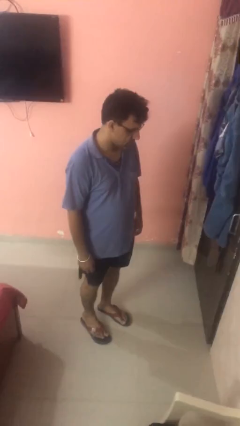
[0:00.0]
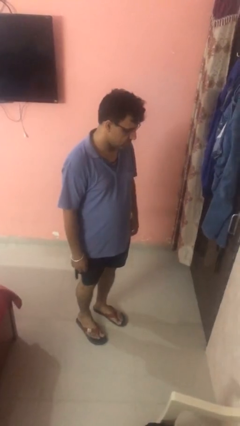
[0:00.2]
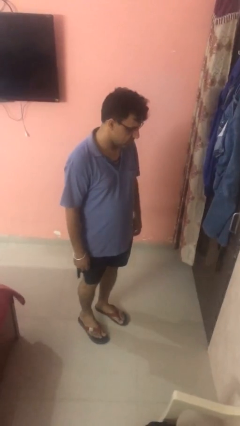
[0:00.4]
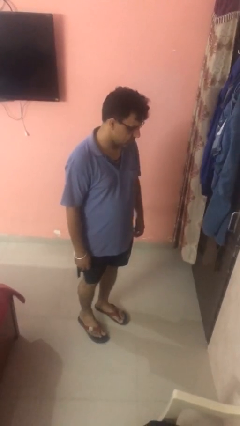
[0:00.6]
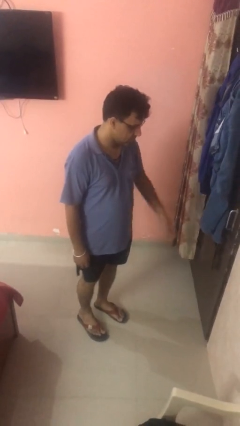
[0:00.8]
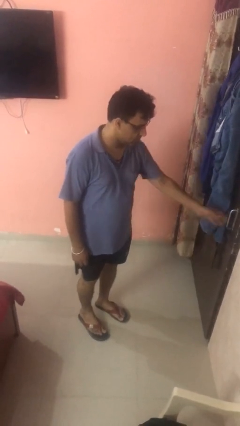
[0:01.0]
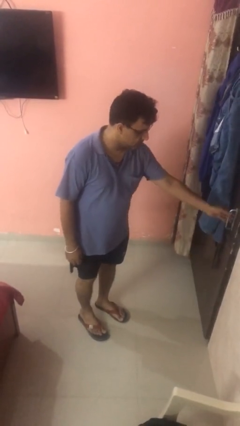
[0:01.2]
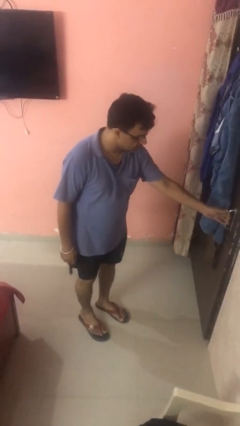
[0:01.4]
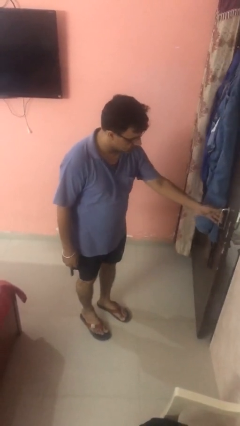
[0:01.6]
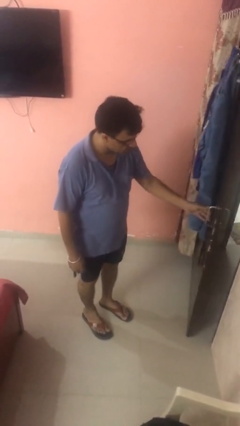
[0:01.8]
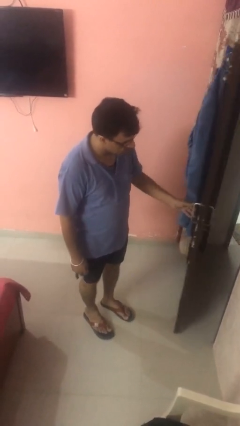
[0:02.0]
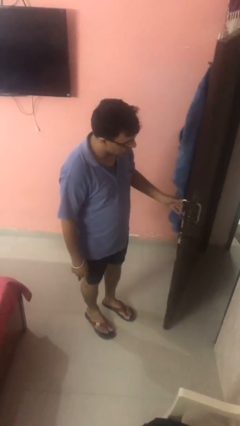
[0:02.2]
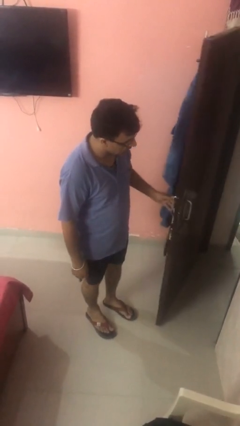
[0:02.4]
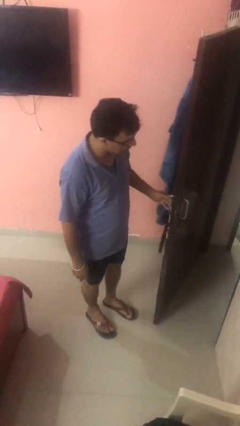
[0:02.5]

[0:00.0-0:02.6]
person opens facility door

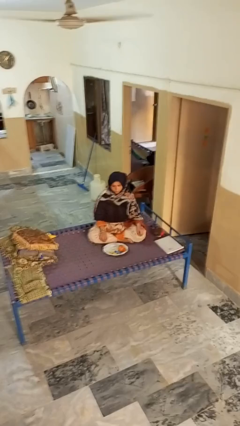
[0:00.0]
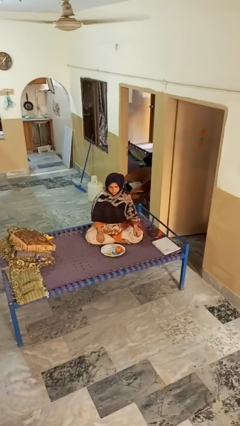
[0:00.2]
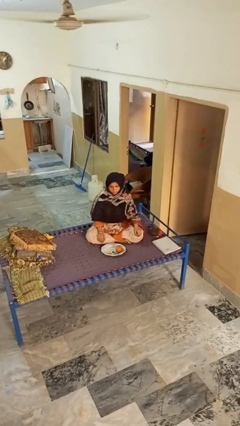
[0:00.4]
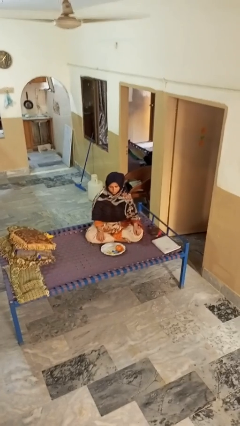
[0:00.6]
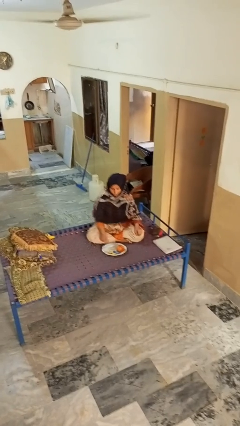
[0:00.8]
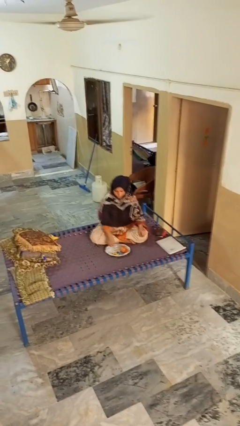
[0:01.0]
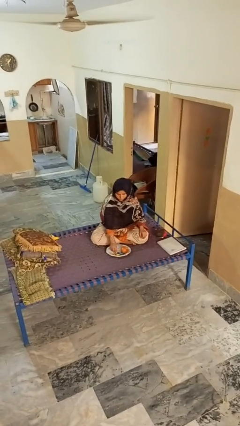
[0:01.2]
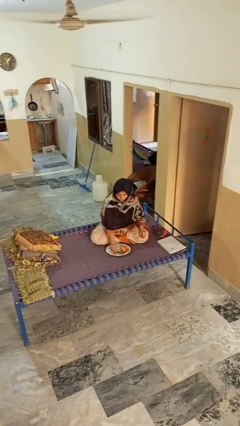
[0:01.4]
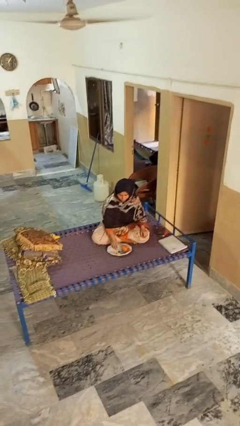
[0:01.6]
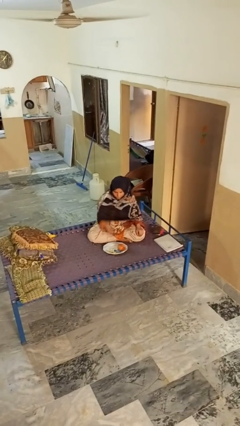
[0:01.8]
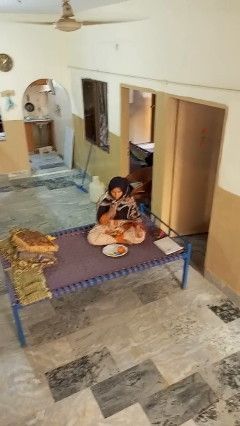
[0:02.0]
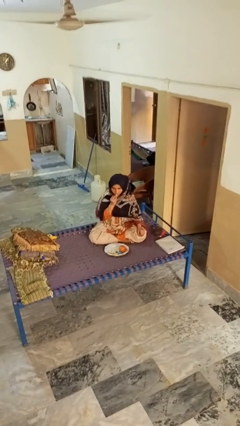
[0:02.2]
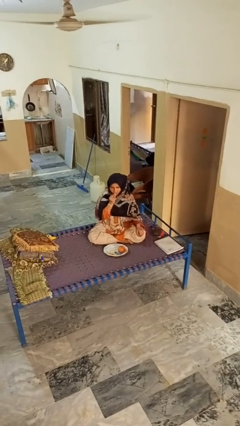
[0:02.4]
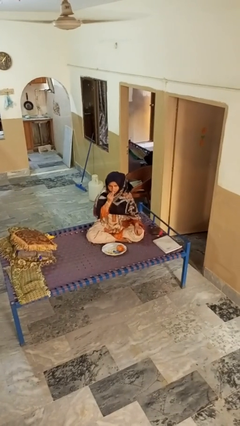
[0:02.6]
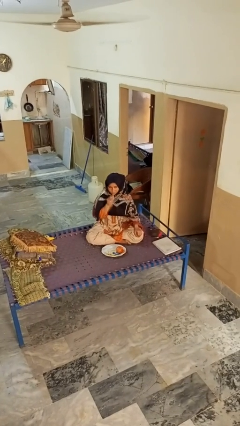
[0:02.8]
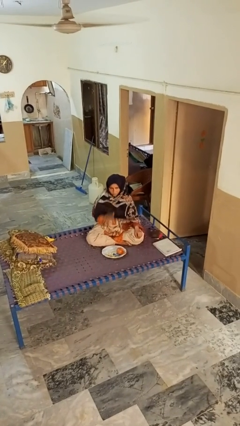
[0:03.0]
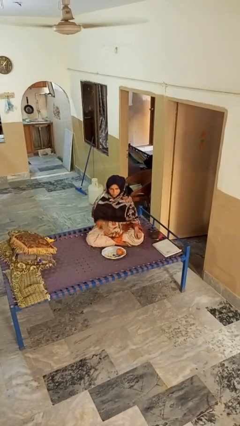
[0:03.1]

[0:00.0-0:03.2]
person eats apple

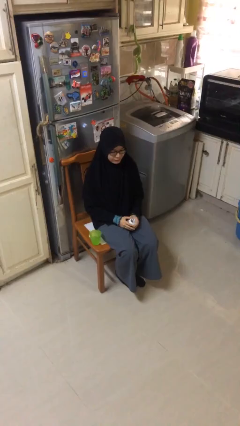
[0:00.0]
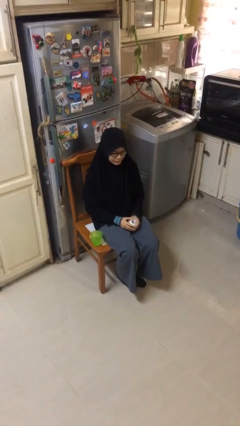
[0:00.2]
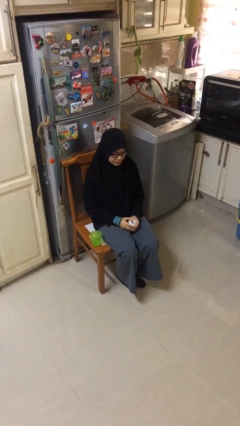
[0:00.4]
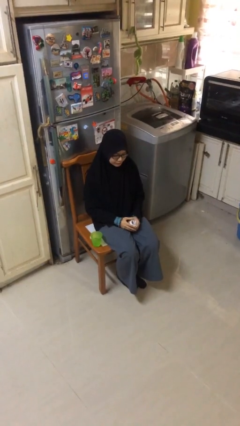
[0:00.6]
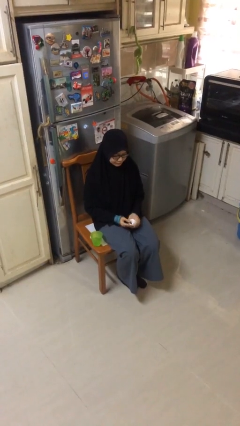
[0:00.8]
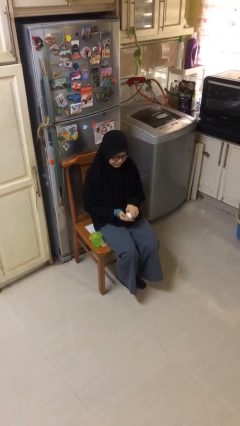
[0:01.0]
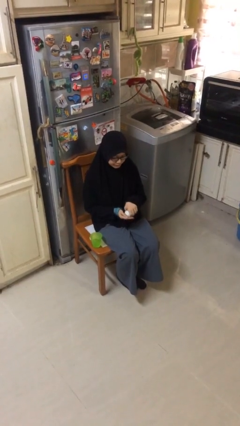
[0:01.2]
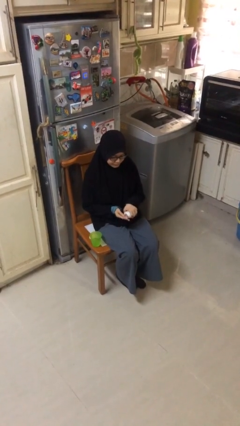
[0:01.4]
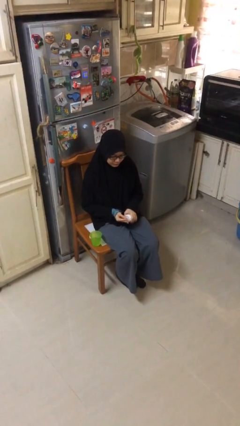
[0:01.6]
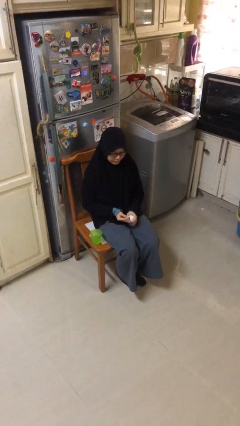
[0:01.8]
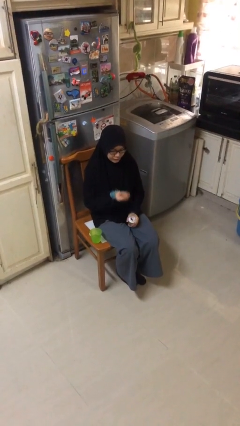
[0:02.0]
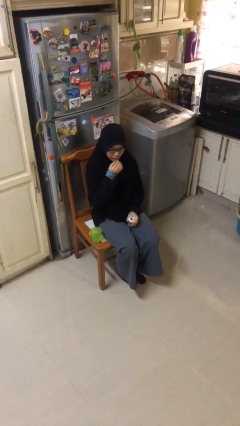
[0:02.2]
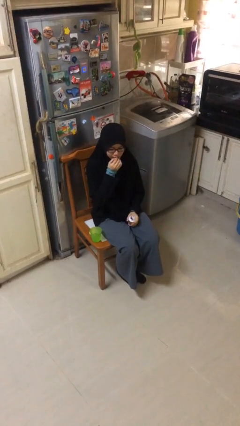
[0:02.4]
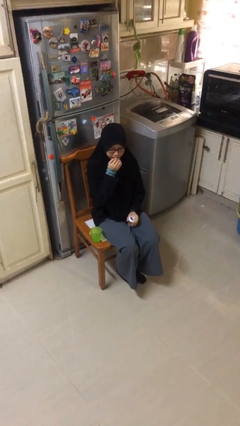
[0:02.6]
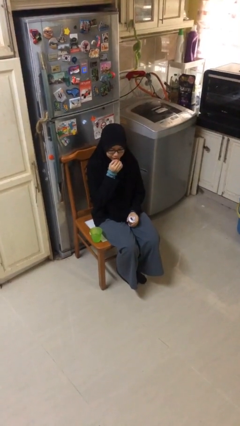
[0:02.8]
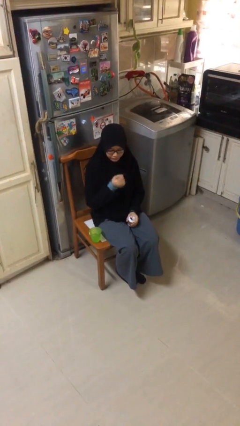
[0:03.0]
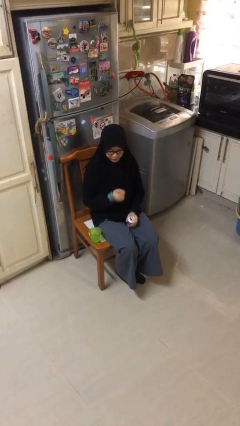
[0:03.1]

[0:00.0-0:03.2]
person takes medicine pills

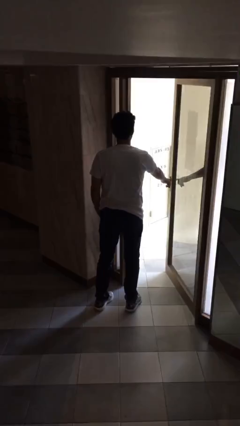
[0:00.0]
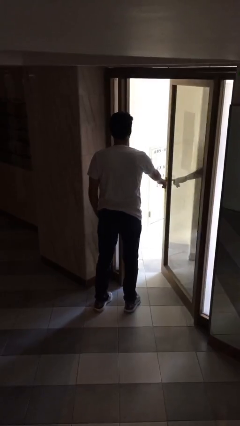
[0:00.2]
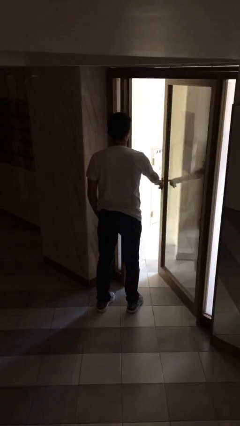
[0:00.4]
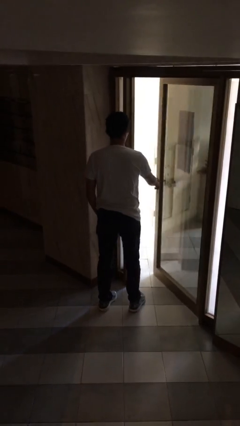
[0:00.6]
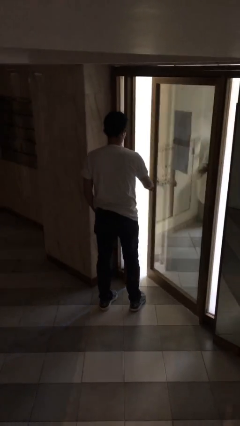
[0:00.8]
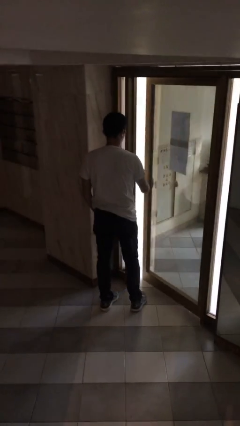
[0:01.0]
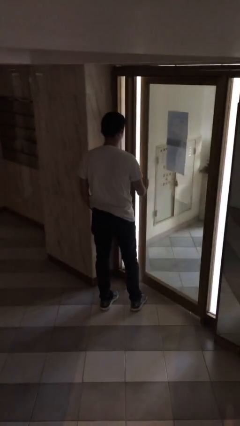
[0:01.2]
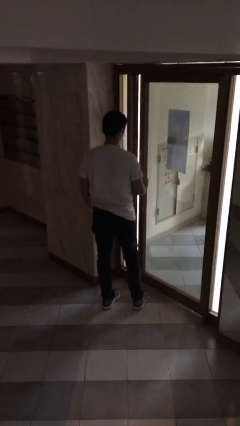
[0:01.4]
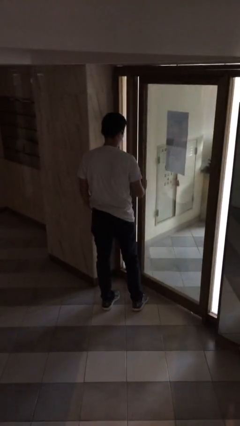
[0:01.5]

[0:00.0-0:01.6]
person closes facility door

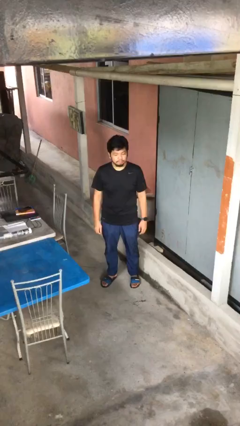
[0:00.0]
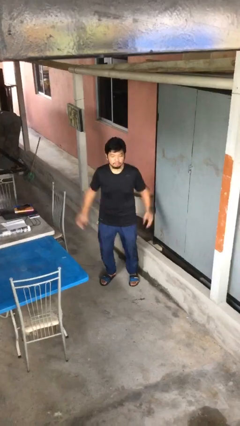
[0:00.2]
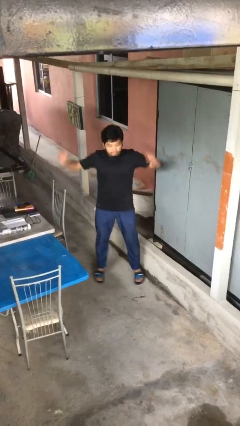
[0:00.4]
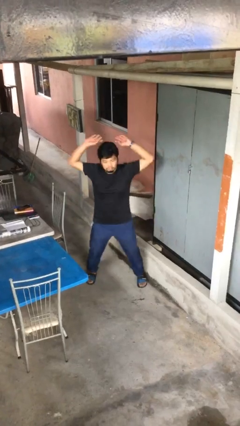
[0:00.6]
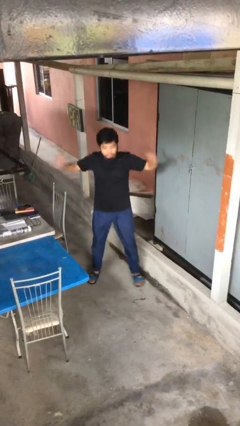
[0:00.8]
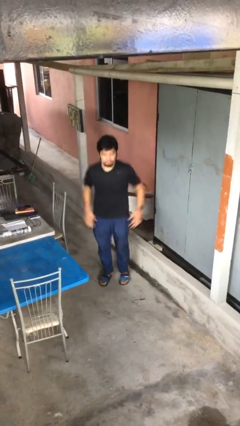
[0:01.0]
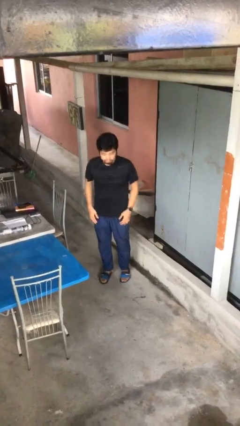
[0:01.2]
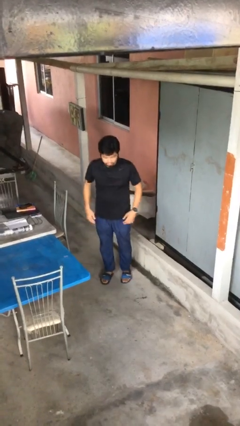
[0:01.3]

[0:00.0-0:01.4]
person exercises with jumping jacks

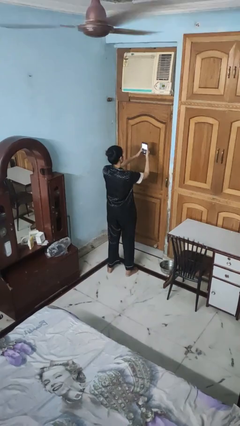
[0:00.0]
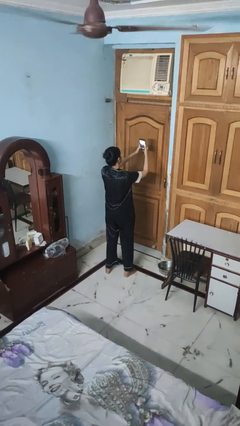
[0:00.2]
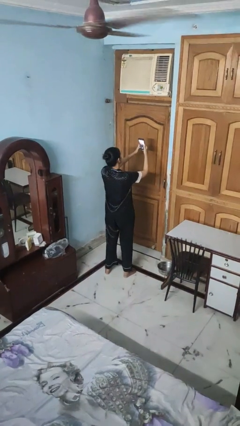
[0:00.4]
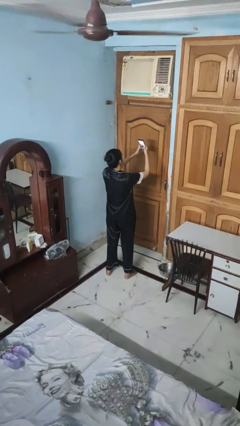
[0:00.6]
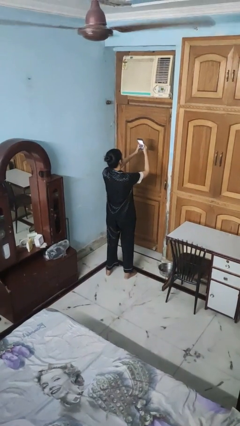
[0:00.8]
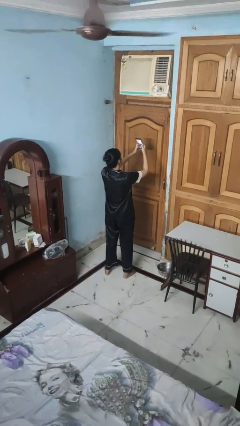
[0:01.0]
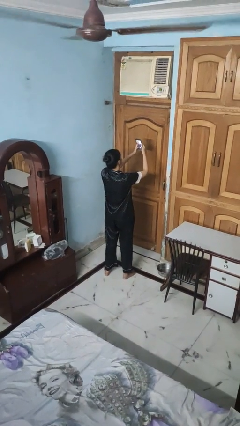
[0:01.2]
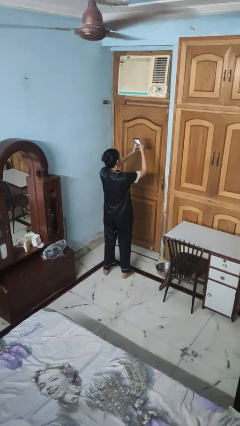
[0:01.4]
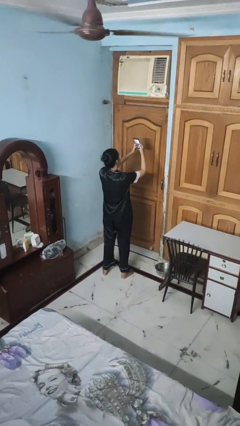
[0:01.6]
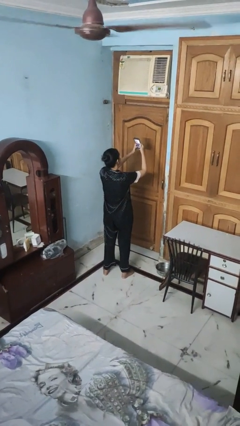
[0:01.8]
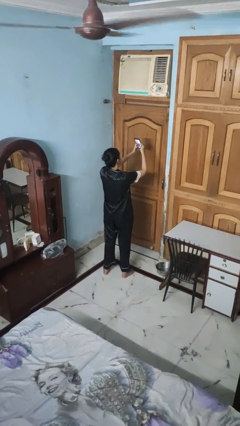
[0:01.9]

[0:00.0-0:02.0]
person takes selfie

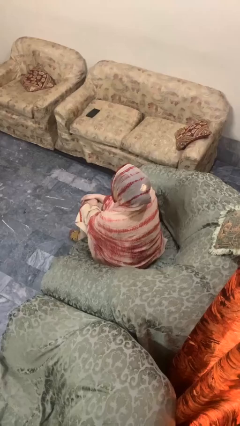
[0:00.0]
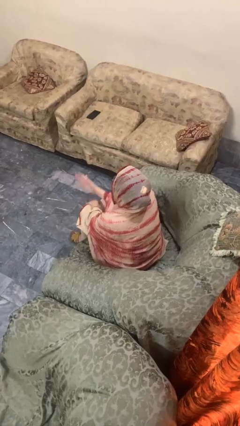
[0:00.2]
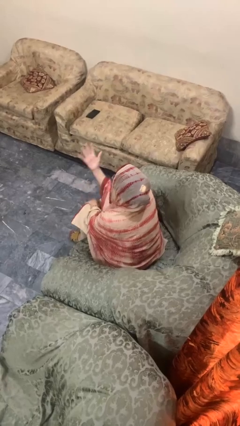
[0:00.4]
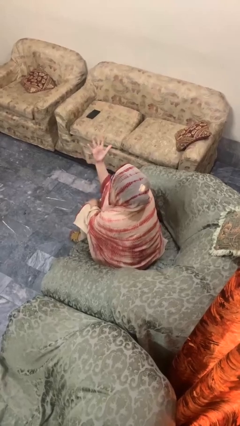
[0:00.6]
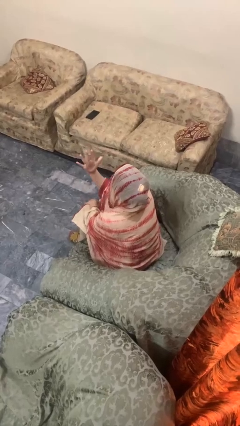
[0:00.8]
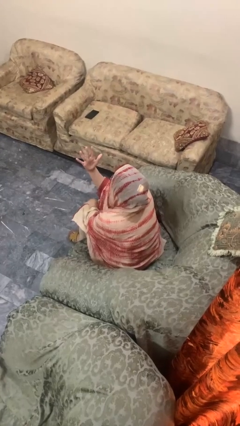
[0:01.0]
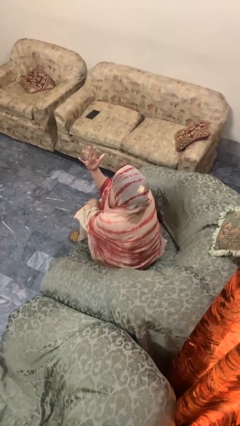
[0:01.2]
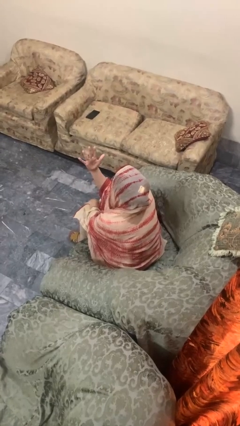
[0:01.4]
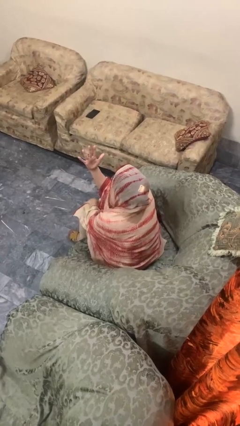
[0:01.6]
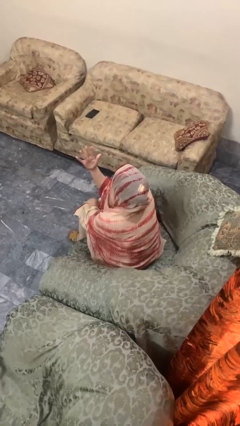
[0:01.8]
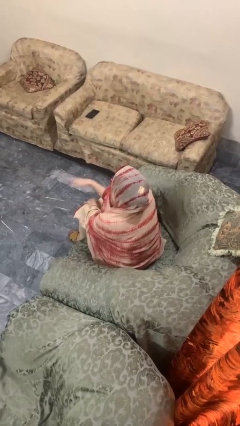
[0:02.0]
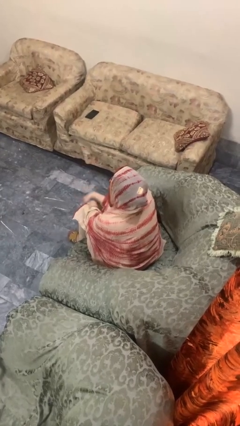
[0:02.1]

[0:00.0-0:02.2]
person gestures number five

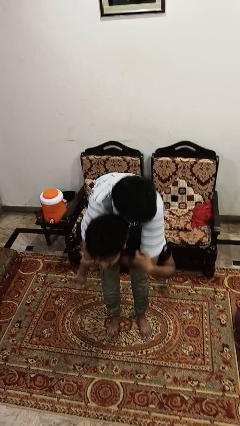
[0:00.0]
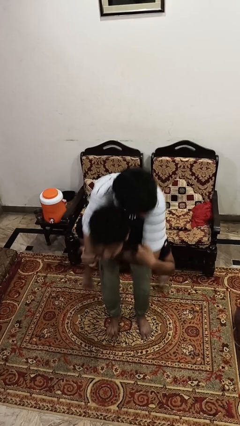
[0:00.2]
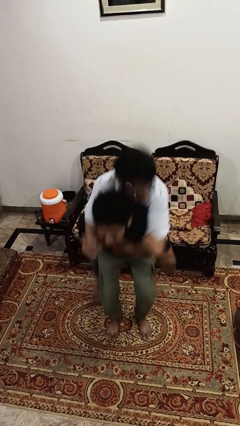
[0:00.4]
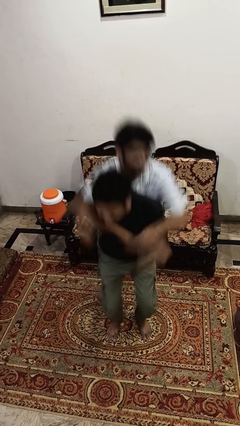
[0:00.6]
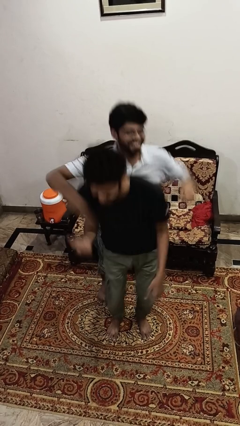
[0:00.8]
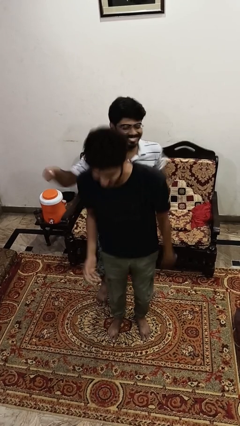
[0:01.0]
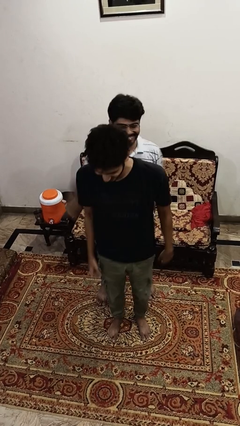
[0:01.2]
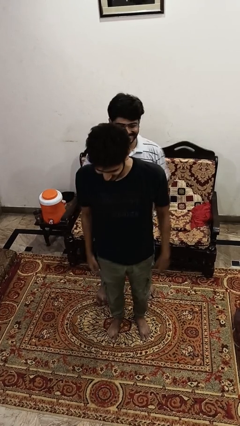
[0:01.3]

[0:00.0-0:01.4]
person puts down person
